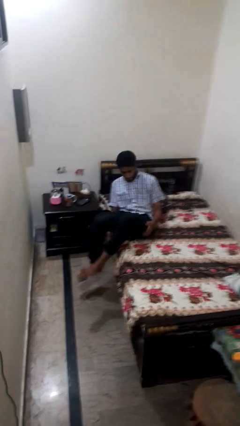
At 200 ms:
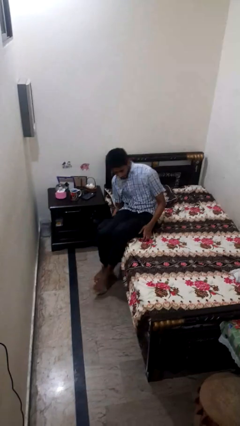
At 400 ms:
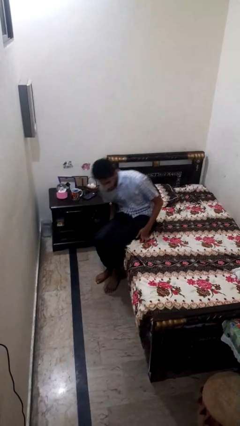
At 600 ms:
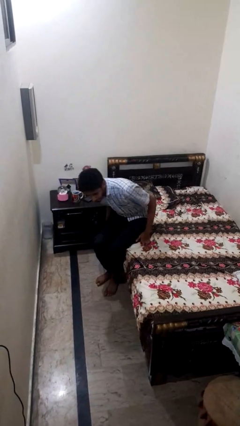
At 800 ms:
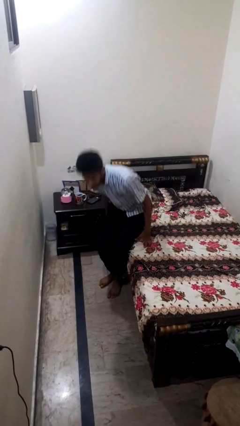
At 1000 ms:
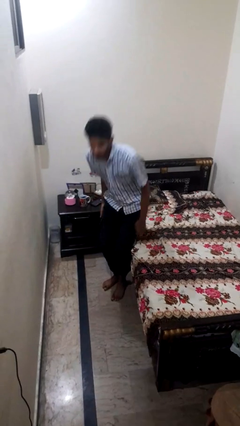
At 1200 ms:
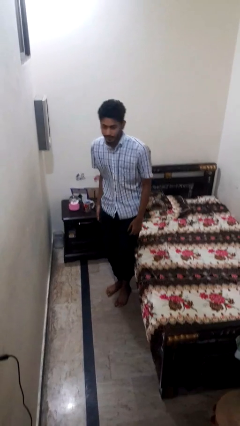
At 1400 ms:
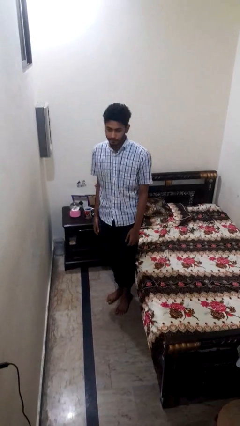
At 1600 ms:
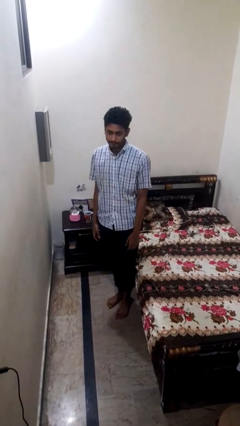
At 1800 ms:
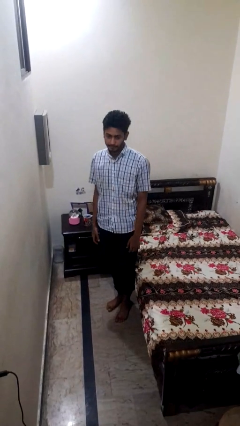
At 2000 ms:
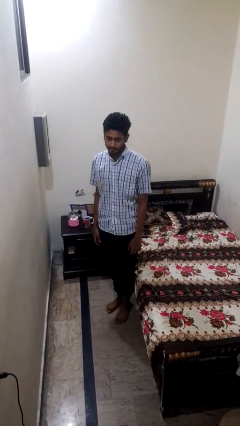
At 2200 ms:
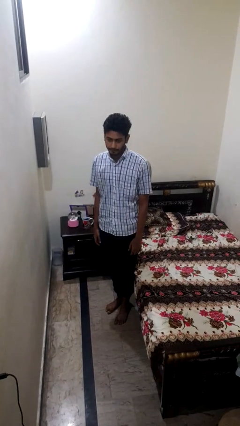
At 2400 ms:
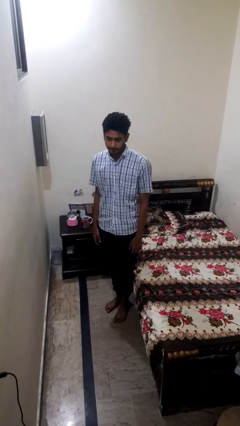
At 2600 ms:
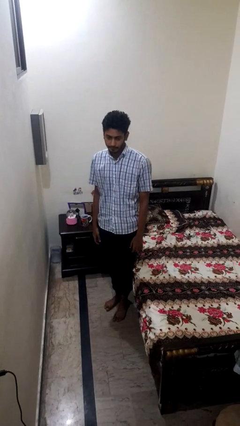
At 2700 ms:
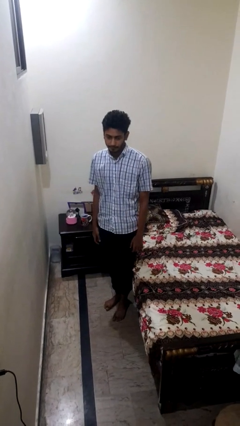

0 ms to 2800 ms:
person stands up

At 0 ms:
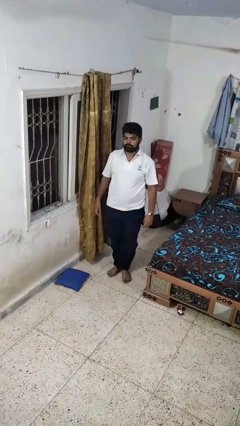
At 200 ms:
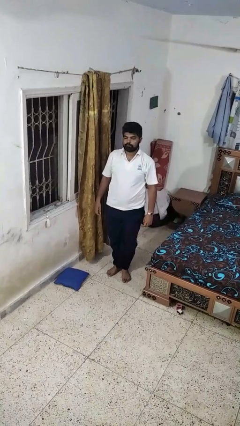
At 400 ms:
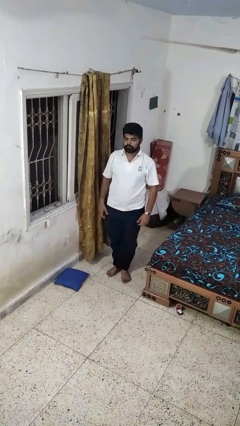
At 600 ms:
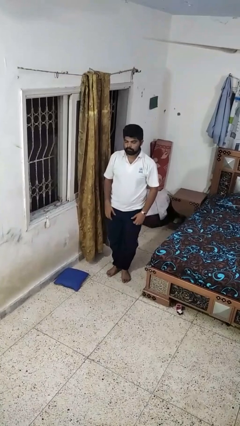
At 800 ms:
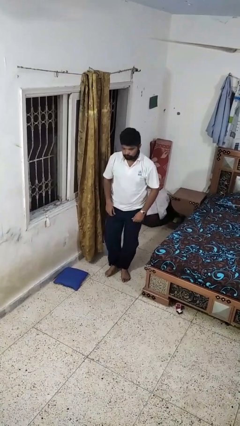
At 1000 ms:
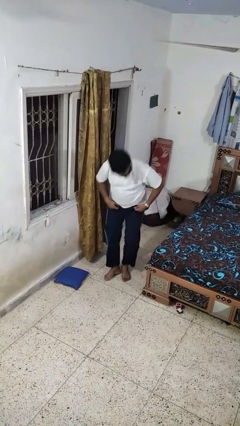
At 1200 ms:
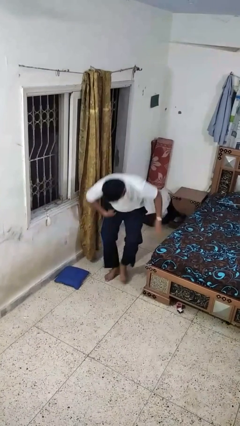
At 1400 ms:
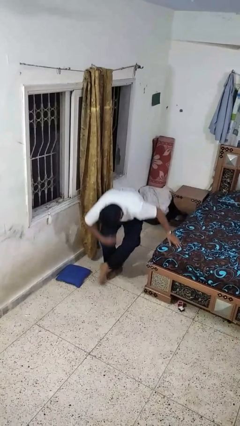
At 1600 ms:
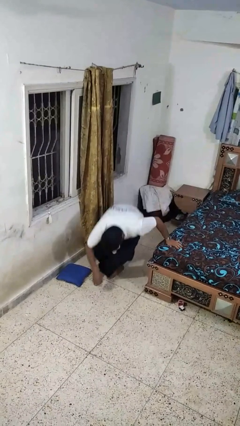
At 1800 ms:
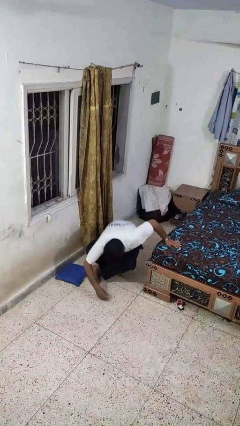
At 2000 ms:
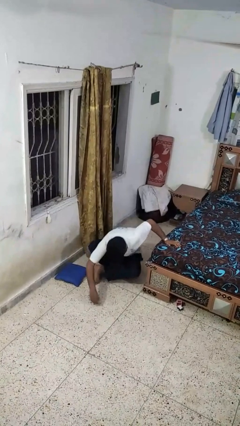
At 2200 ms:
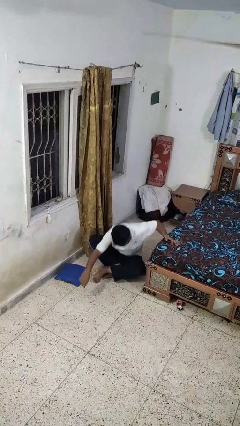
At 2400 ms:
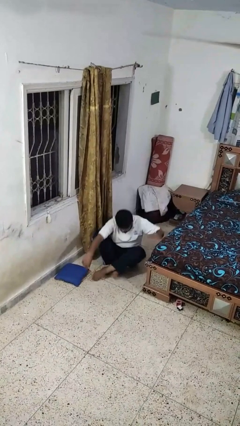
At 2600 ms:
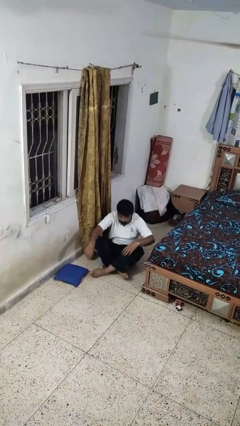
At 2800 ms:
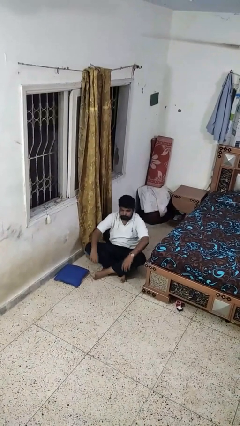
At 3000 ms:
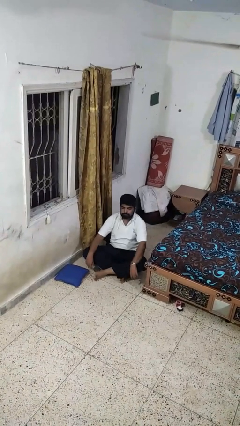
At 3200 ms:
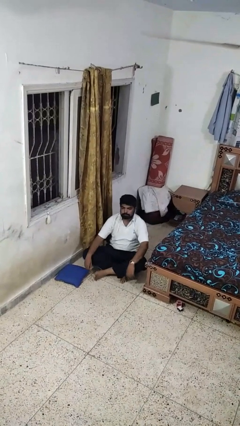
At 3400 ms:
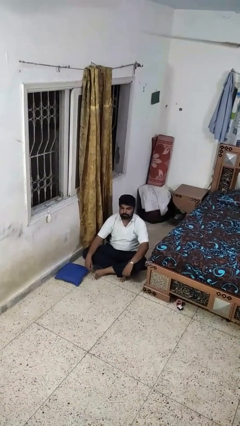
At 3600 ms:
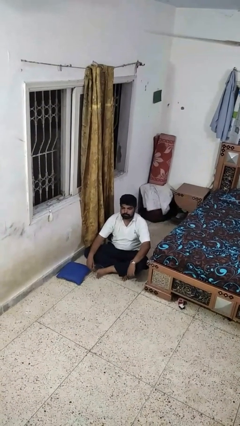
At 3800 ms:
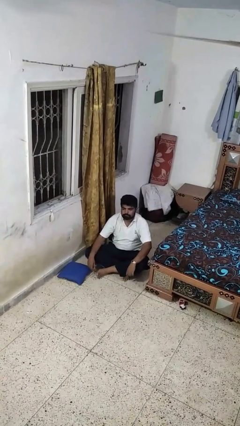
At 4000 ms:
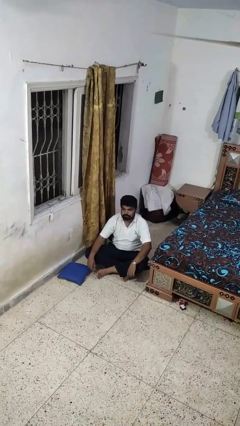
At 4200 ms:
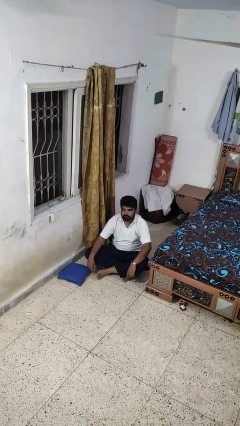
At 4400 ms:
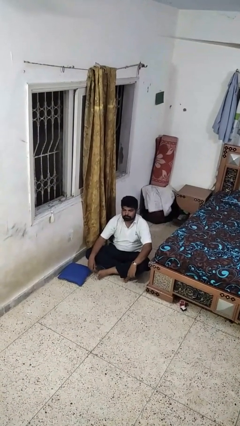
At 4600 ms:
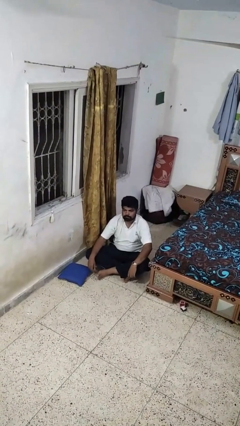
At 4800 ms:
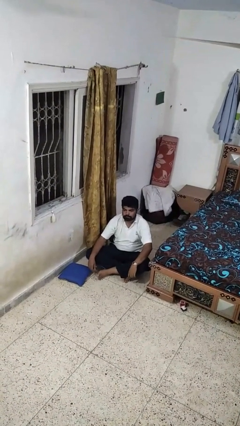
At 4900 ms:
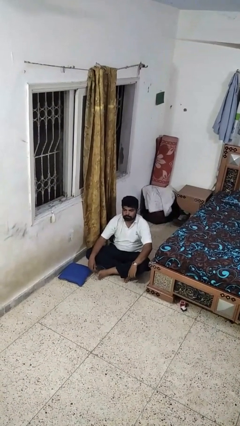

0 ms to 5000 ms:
person sits crisscross

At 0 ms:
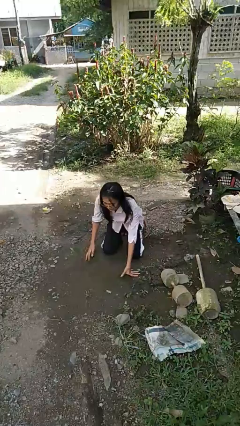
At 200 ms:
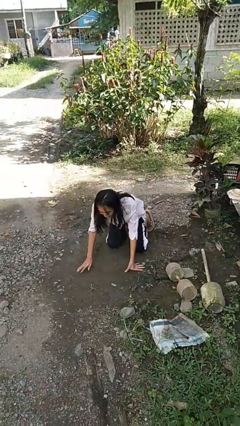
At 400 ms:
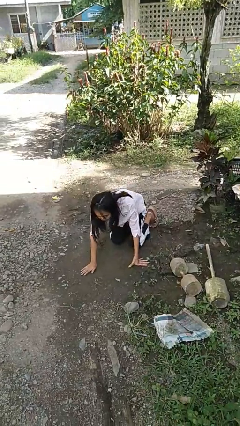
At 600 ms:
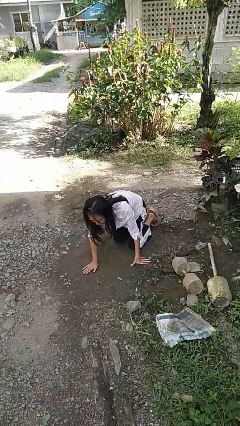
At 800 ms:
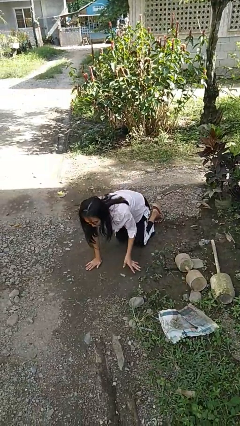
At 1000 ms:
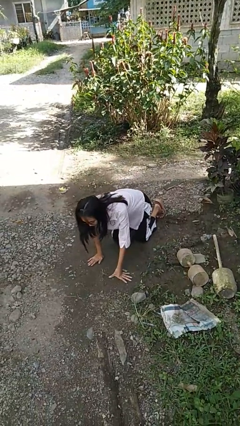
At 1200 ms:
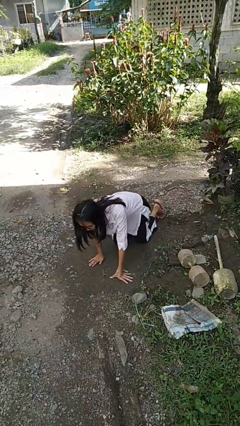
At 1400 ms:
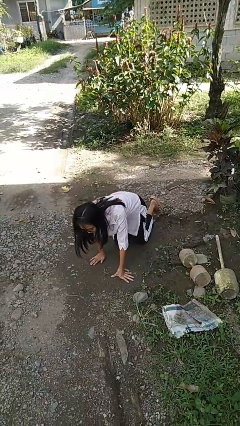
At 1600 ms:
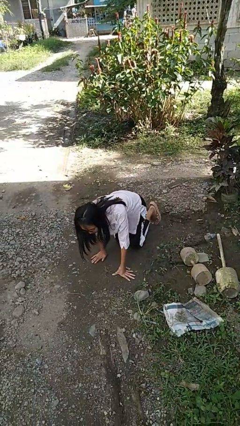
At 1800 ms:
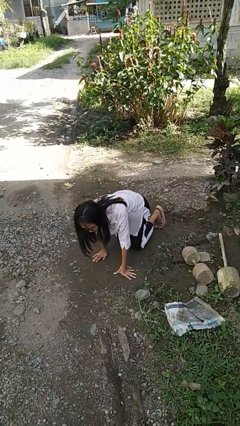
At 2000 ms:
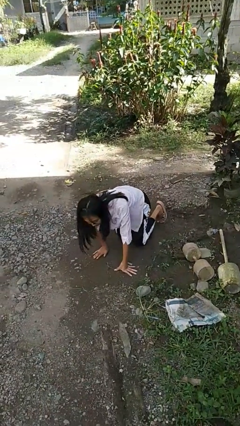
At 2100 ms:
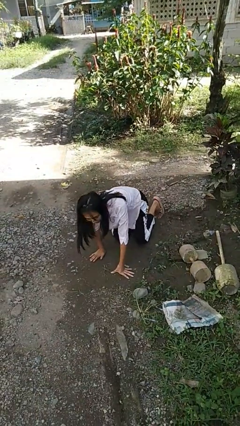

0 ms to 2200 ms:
person crawls

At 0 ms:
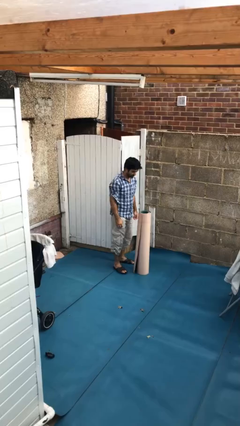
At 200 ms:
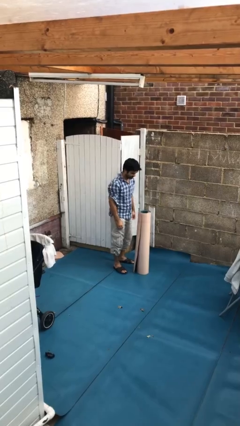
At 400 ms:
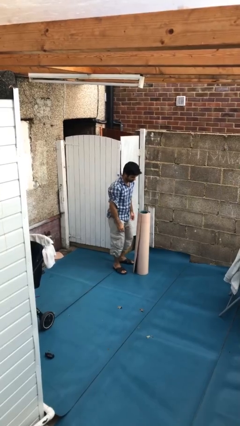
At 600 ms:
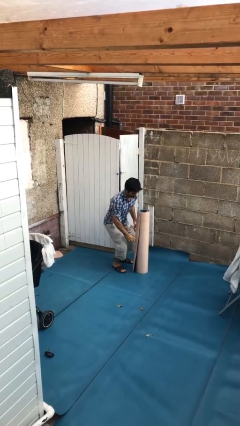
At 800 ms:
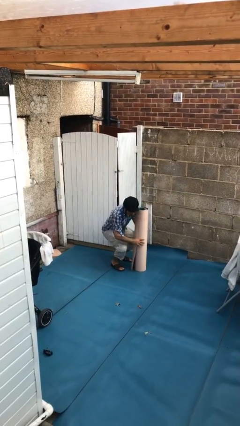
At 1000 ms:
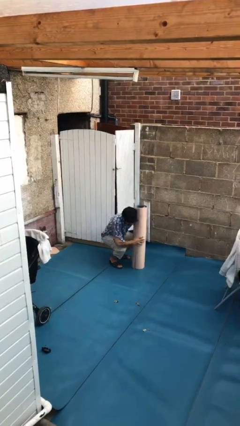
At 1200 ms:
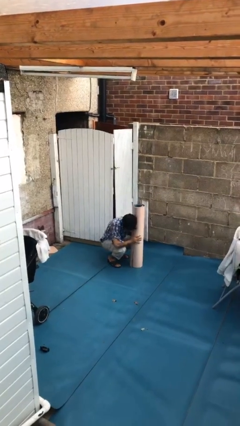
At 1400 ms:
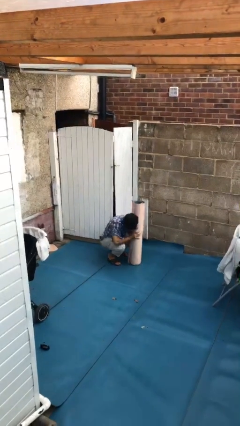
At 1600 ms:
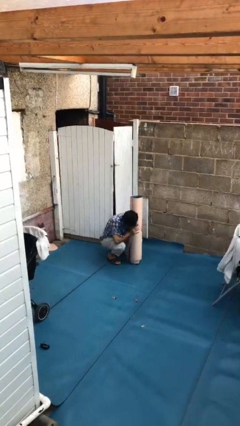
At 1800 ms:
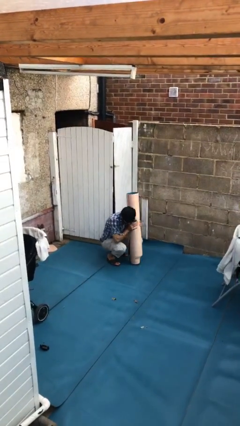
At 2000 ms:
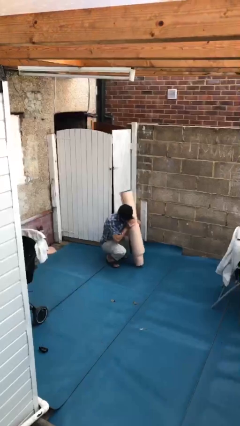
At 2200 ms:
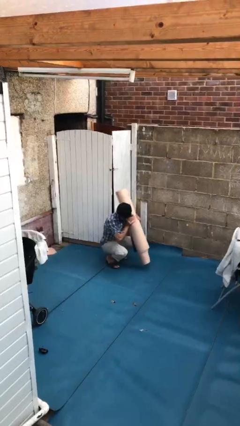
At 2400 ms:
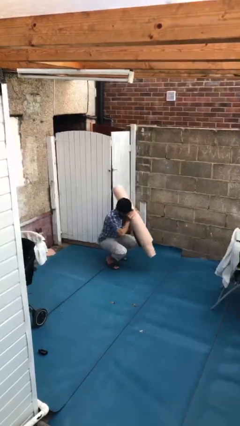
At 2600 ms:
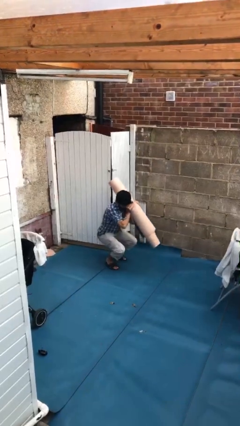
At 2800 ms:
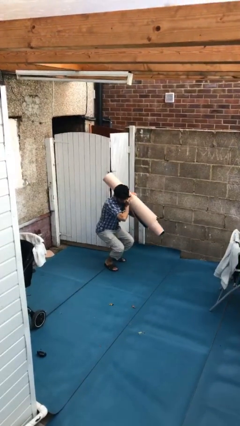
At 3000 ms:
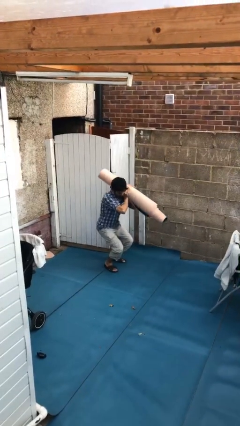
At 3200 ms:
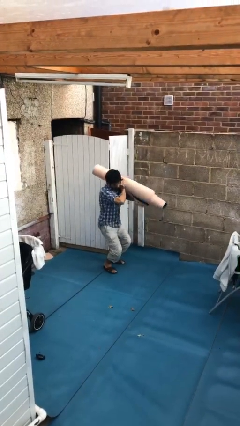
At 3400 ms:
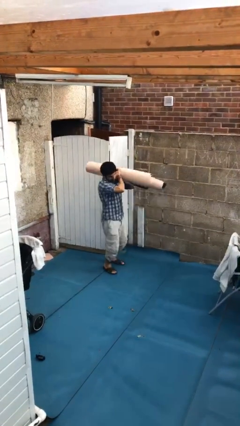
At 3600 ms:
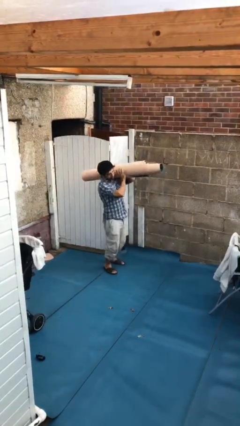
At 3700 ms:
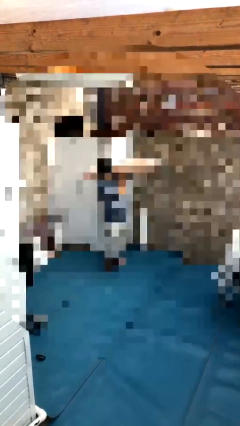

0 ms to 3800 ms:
person picks up object from floor

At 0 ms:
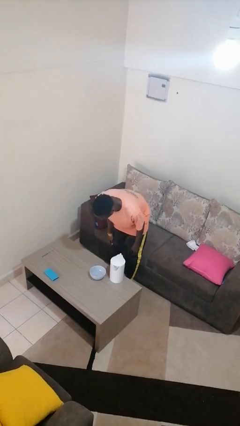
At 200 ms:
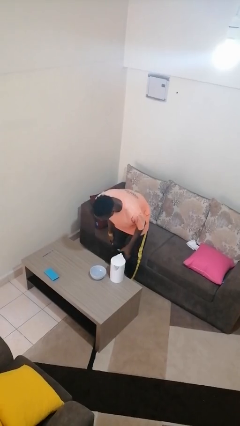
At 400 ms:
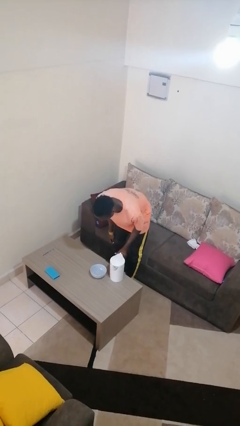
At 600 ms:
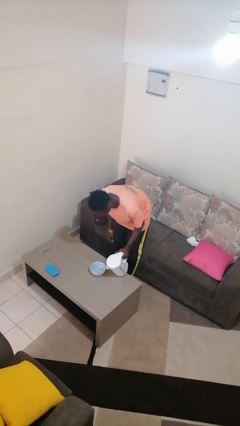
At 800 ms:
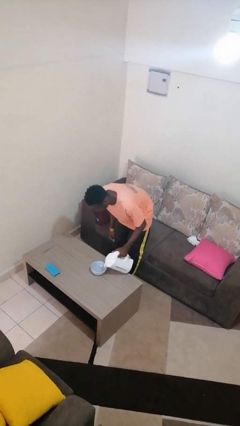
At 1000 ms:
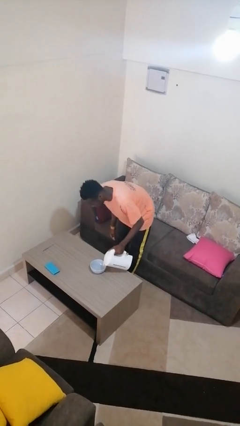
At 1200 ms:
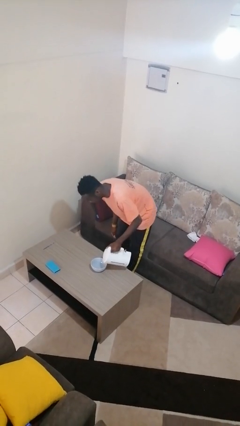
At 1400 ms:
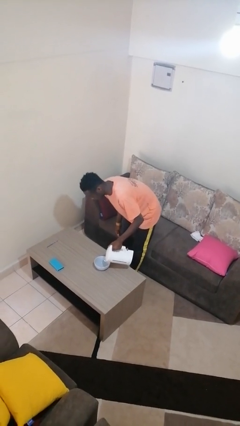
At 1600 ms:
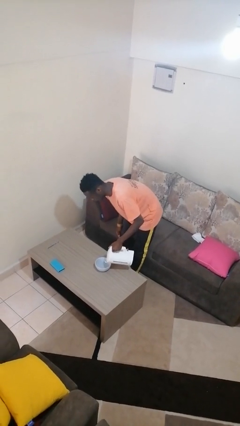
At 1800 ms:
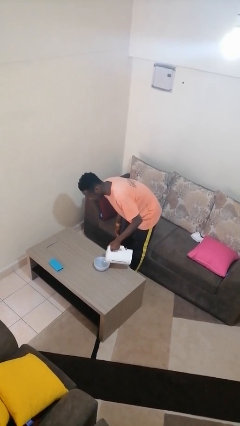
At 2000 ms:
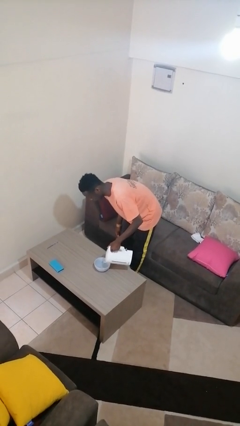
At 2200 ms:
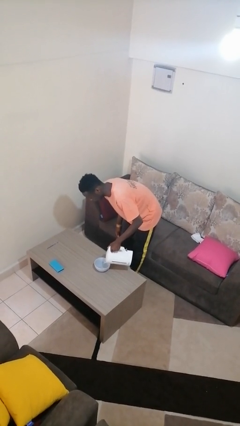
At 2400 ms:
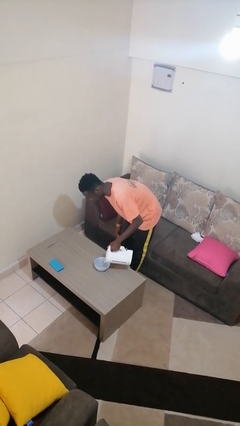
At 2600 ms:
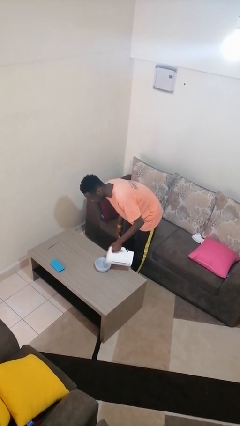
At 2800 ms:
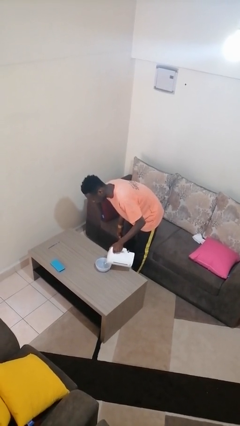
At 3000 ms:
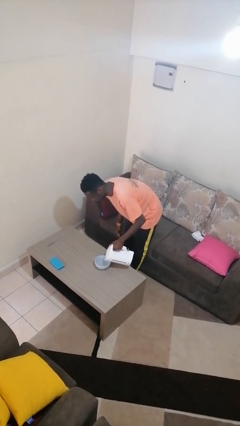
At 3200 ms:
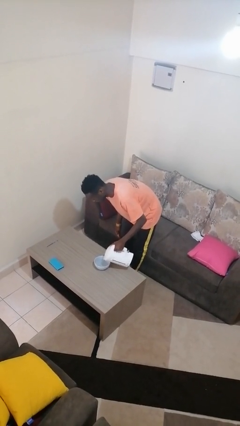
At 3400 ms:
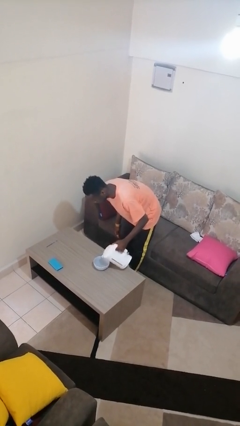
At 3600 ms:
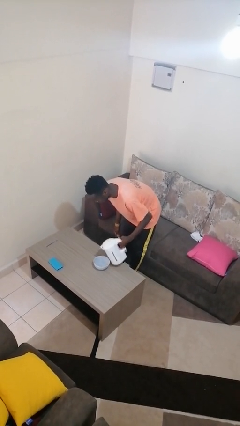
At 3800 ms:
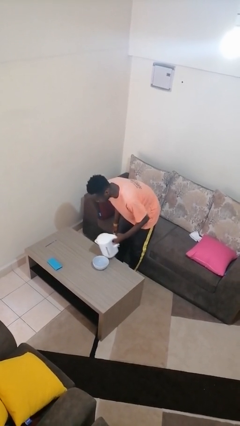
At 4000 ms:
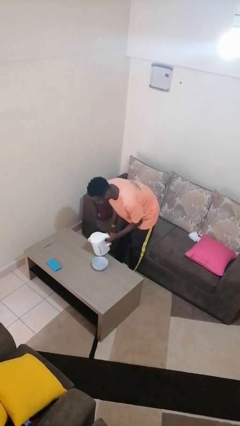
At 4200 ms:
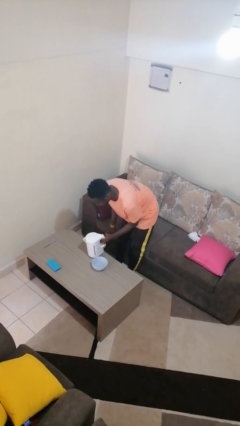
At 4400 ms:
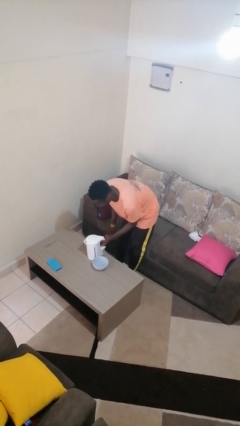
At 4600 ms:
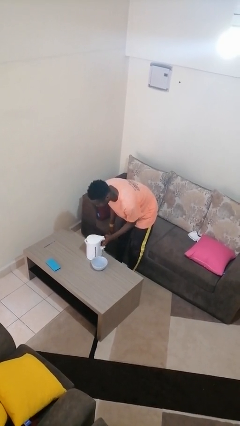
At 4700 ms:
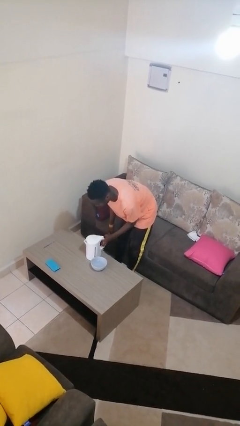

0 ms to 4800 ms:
person pours into bowl
